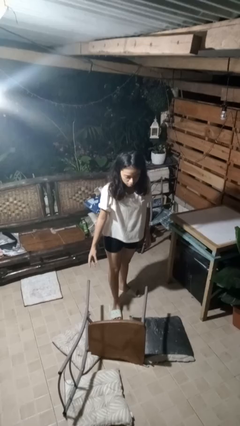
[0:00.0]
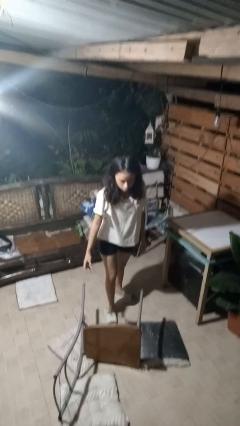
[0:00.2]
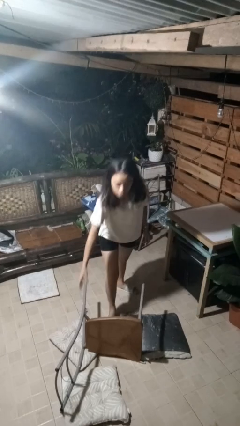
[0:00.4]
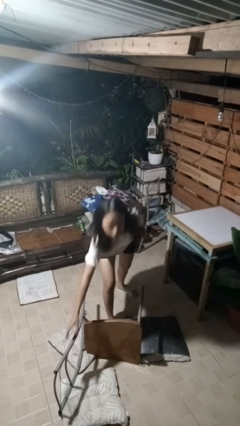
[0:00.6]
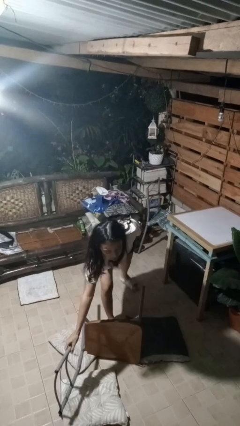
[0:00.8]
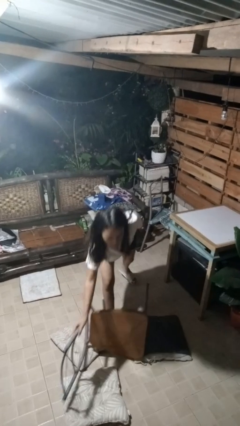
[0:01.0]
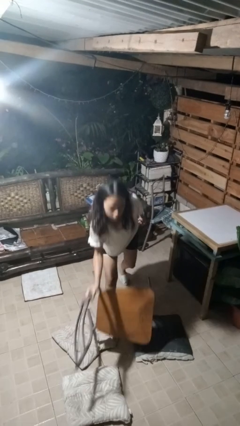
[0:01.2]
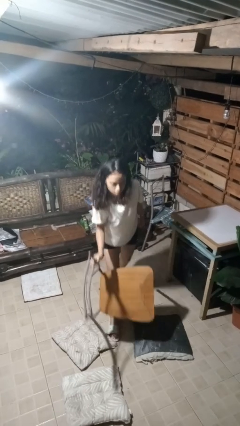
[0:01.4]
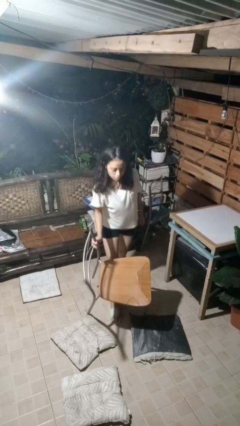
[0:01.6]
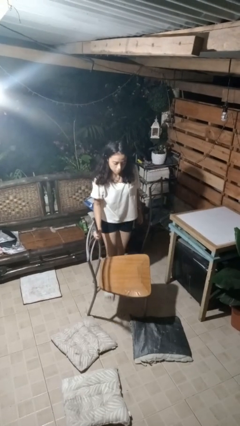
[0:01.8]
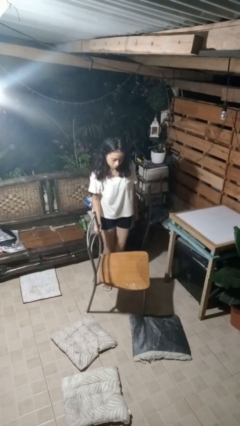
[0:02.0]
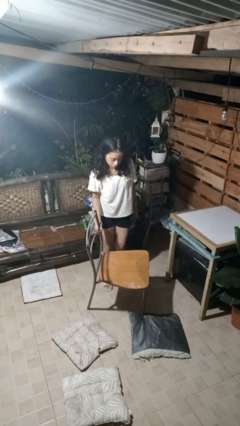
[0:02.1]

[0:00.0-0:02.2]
person sets upright furniture

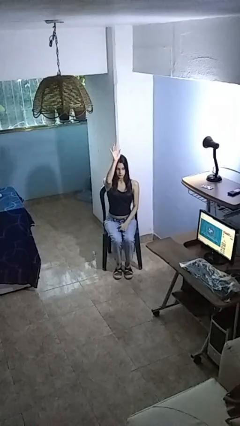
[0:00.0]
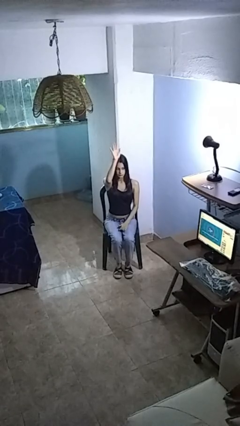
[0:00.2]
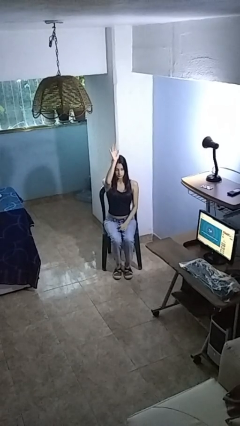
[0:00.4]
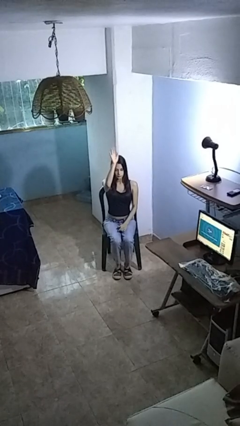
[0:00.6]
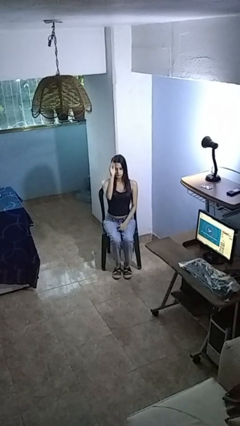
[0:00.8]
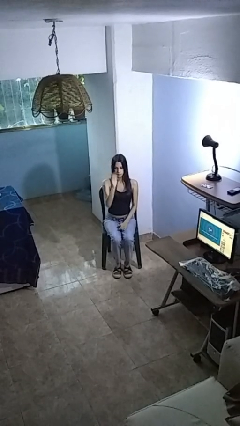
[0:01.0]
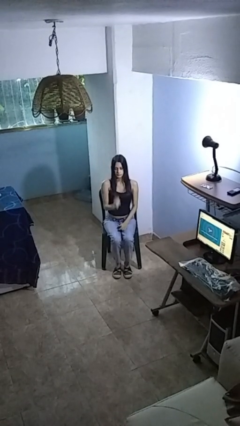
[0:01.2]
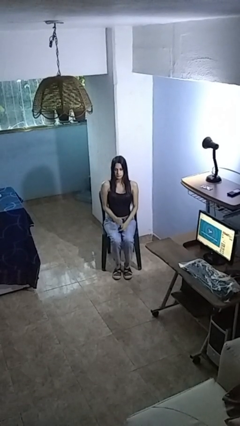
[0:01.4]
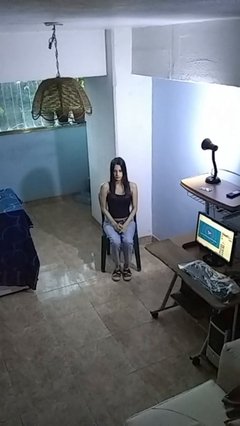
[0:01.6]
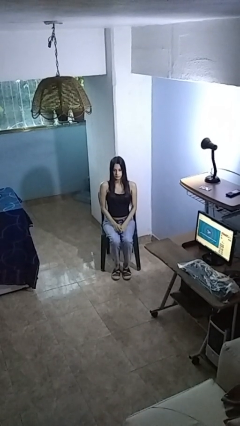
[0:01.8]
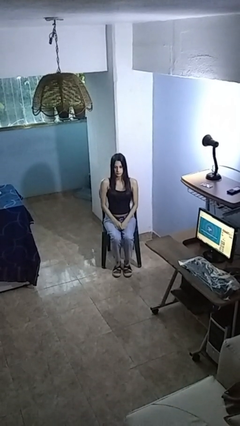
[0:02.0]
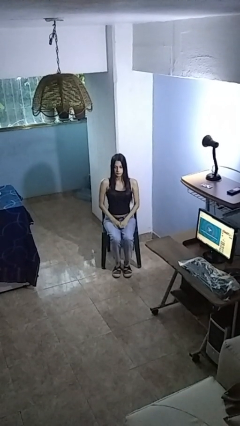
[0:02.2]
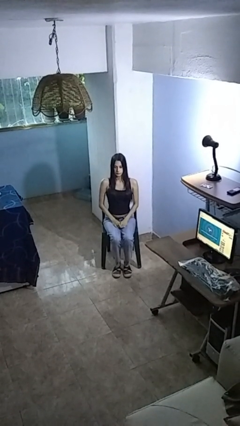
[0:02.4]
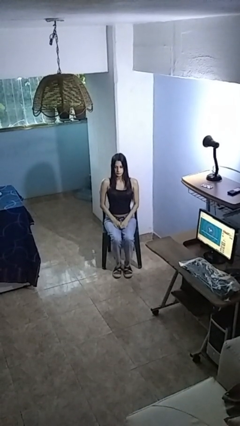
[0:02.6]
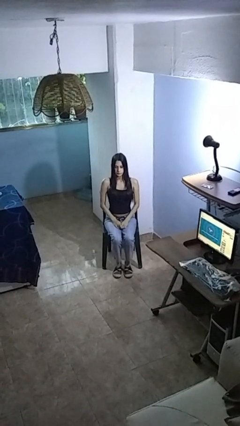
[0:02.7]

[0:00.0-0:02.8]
person gestures lower hand

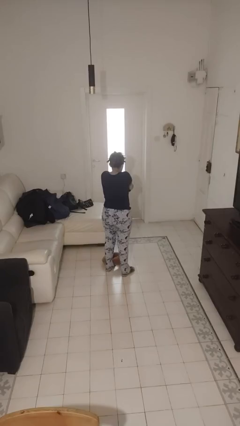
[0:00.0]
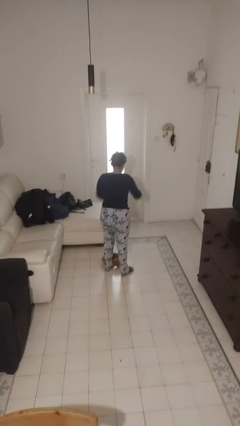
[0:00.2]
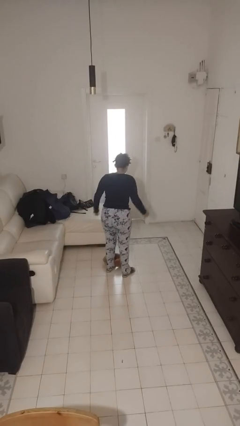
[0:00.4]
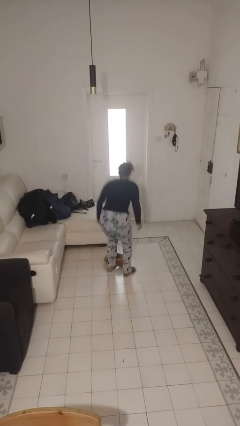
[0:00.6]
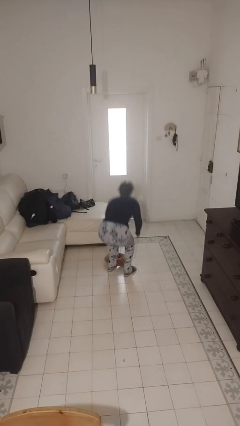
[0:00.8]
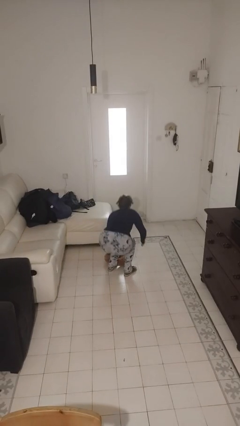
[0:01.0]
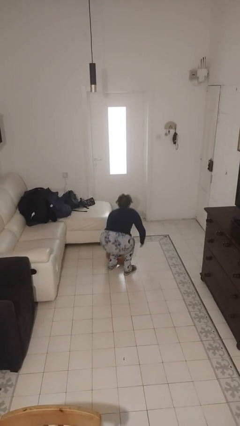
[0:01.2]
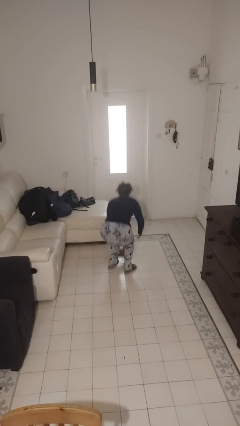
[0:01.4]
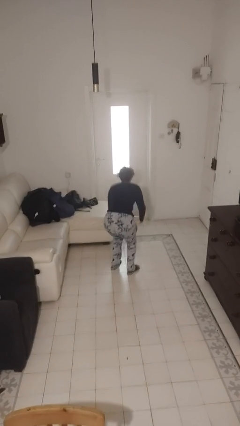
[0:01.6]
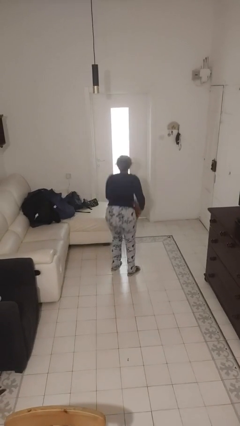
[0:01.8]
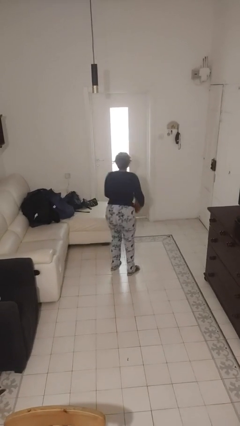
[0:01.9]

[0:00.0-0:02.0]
person picks up object from floor

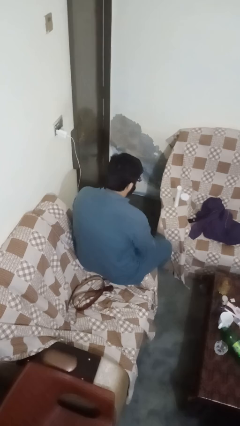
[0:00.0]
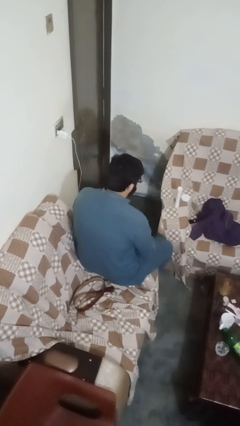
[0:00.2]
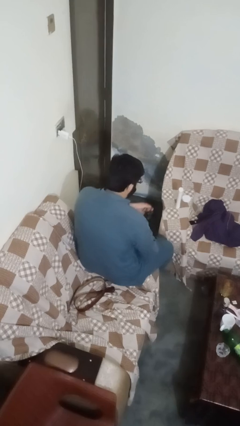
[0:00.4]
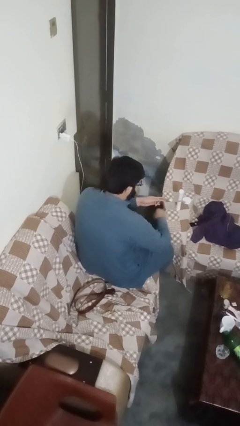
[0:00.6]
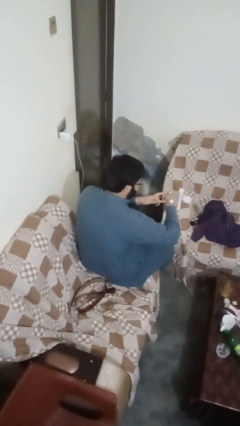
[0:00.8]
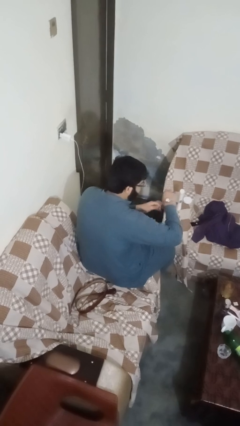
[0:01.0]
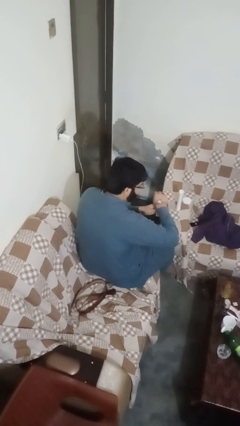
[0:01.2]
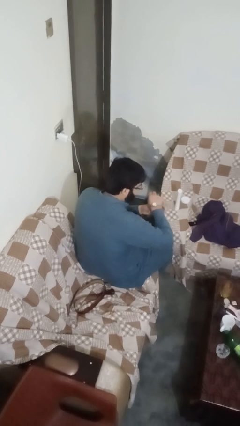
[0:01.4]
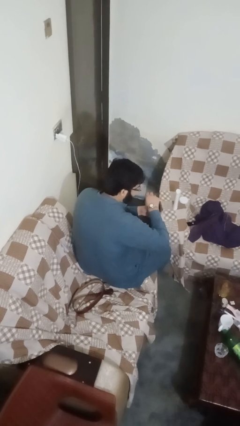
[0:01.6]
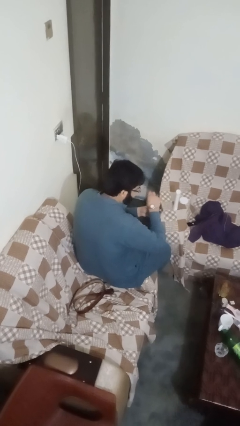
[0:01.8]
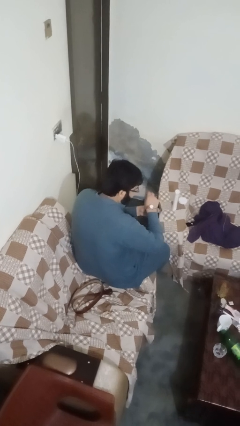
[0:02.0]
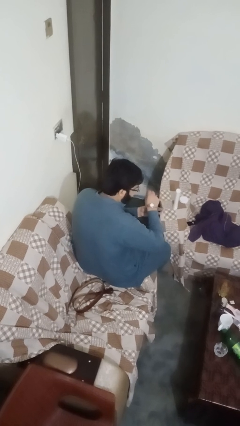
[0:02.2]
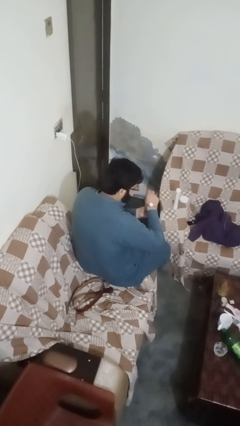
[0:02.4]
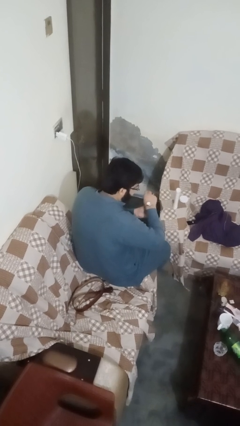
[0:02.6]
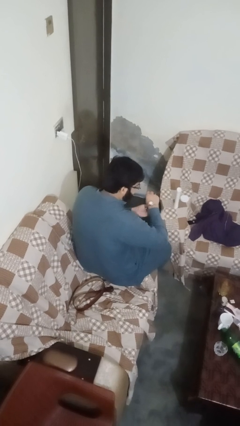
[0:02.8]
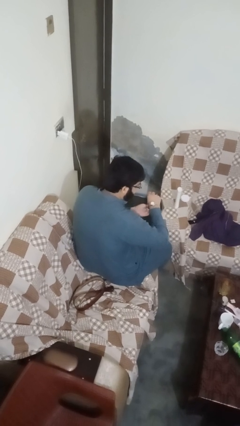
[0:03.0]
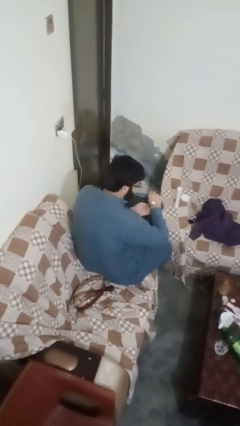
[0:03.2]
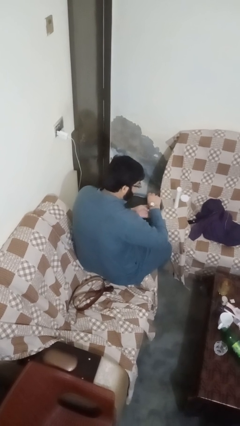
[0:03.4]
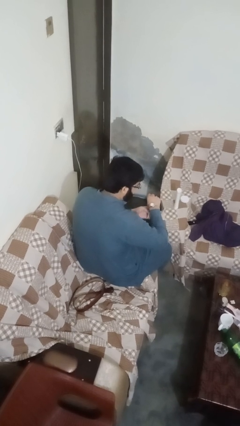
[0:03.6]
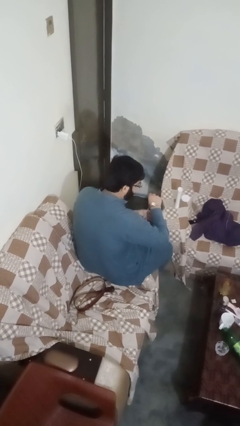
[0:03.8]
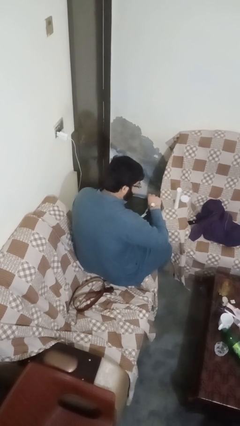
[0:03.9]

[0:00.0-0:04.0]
person puts on wristwatch

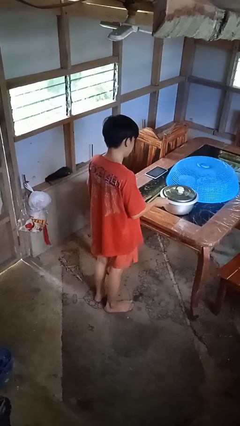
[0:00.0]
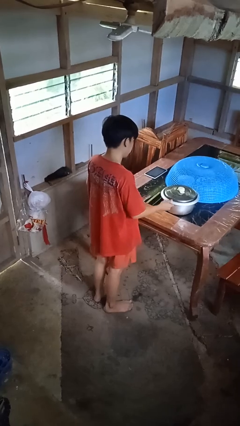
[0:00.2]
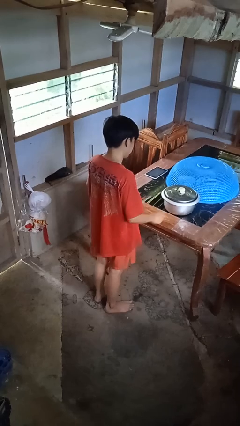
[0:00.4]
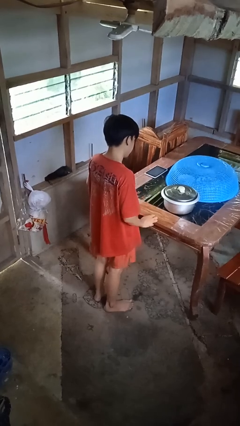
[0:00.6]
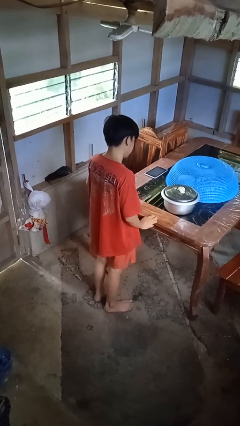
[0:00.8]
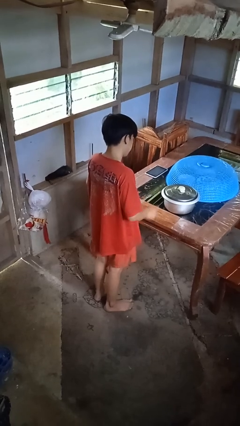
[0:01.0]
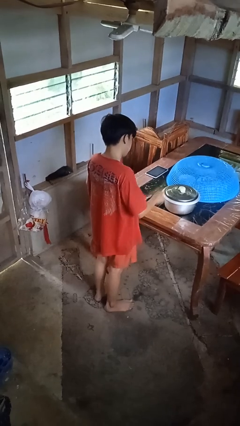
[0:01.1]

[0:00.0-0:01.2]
person taps object with finger

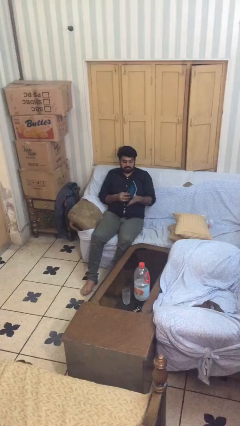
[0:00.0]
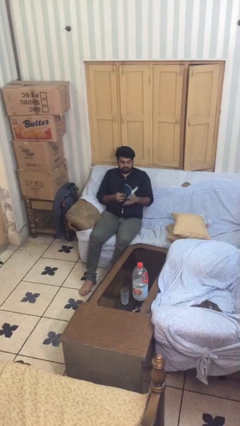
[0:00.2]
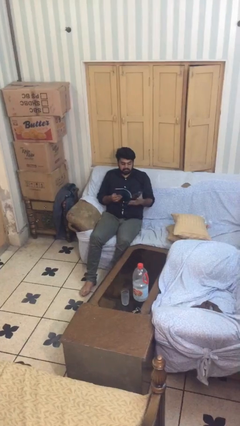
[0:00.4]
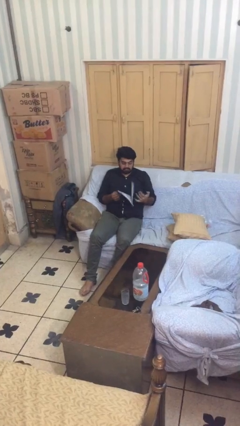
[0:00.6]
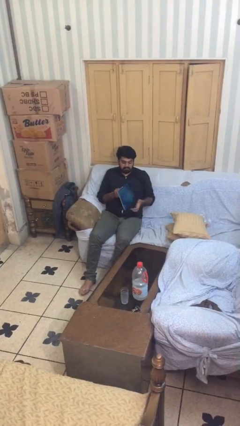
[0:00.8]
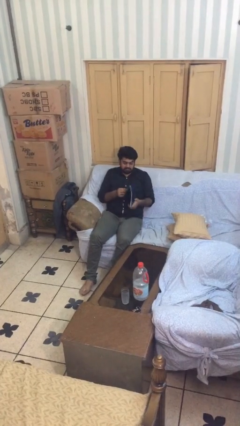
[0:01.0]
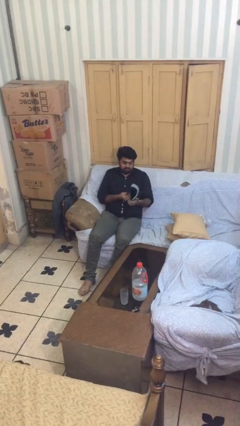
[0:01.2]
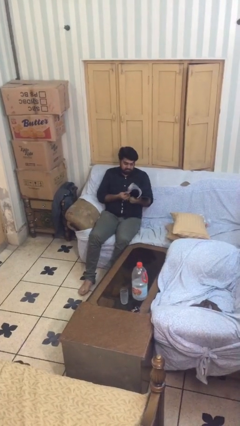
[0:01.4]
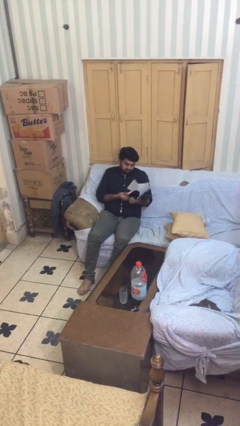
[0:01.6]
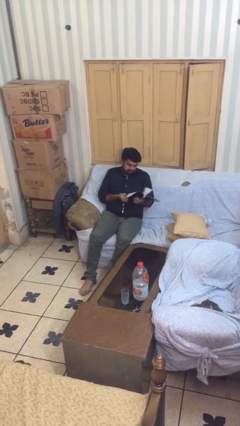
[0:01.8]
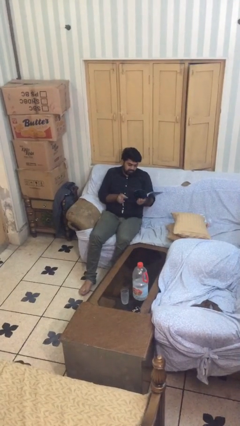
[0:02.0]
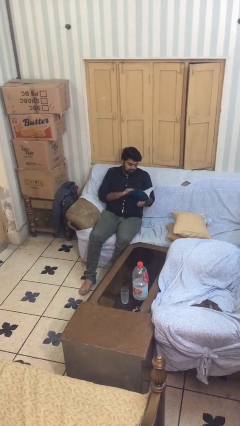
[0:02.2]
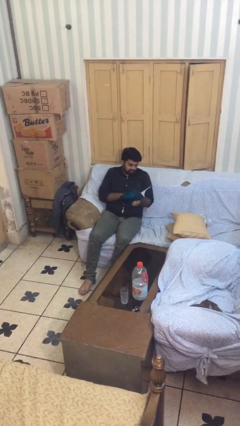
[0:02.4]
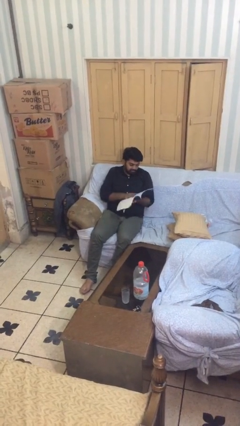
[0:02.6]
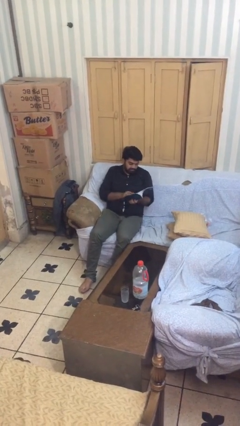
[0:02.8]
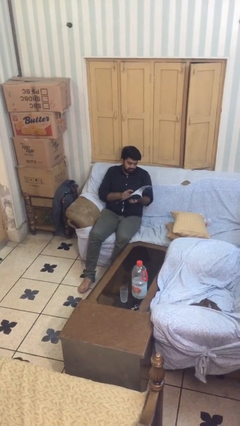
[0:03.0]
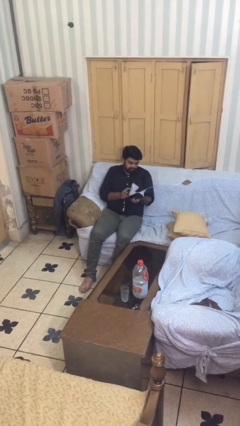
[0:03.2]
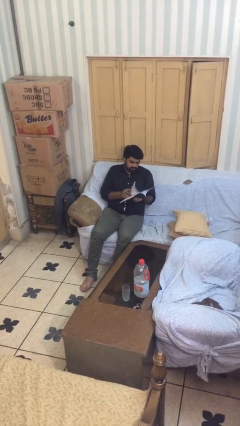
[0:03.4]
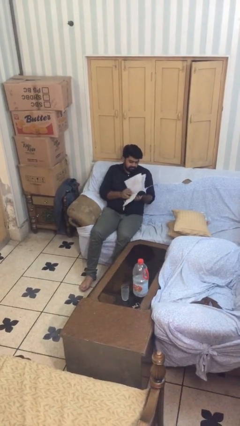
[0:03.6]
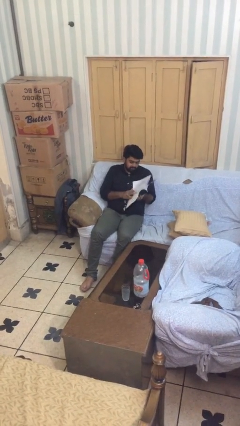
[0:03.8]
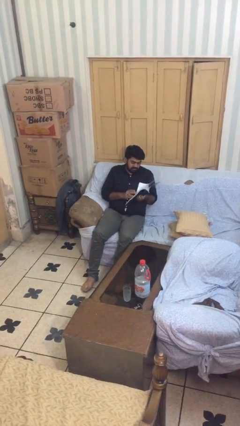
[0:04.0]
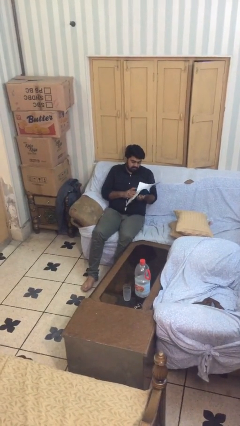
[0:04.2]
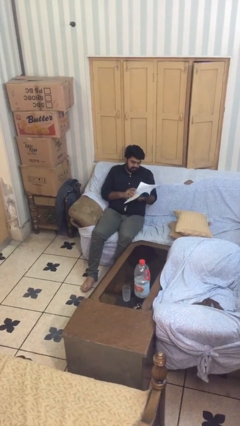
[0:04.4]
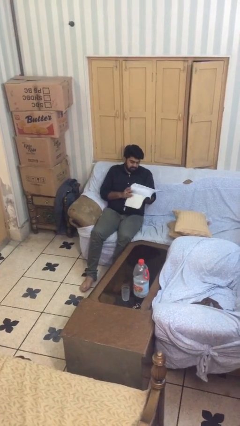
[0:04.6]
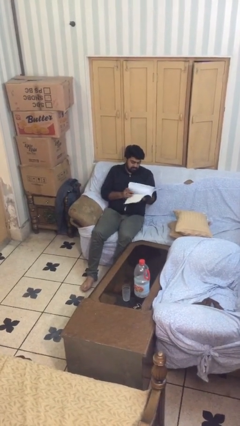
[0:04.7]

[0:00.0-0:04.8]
person reads document

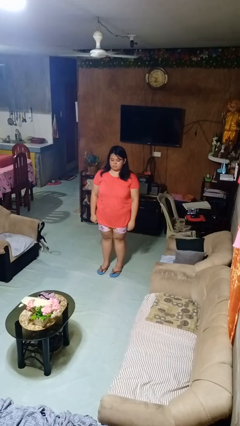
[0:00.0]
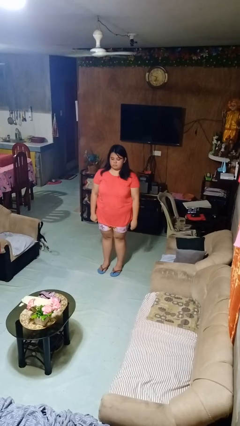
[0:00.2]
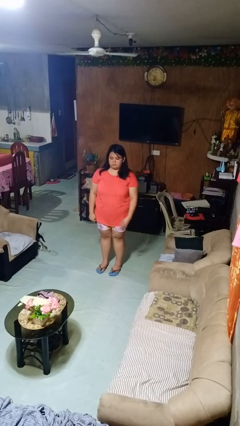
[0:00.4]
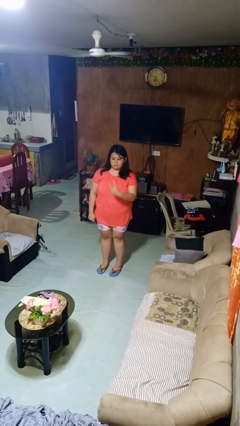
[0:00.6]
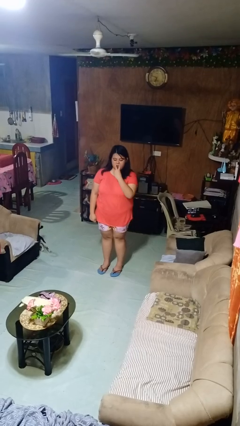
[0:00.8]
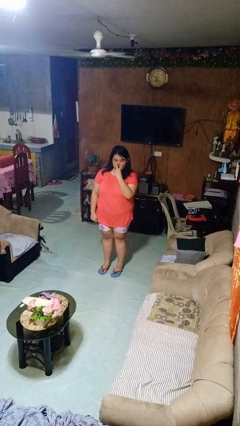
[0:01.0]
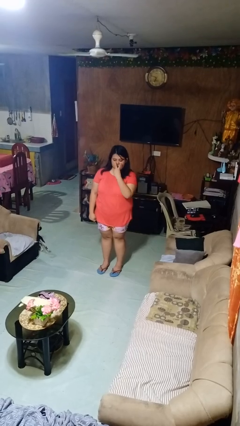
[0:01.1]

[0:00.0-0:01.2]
person gestures watch closely
